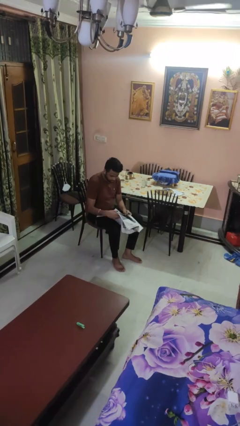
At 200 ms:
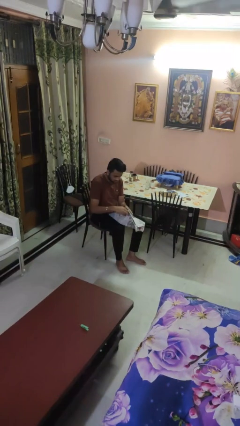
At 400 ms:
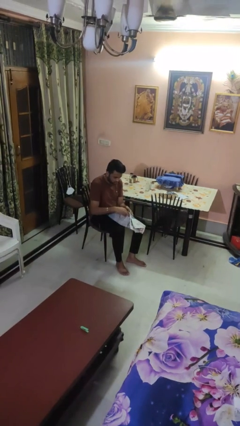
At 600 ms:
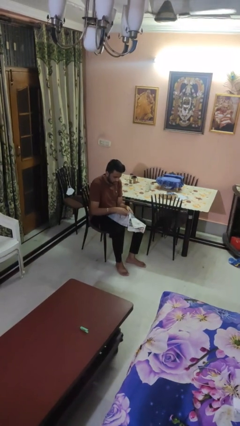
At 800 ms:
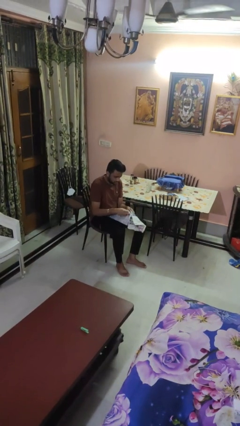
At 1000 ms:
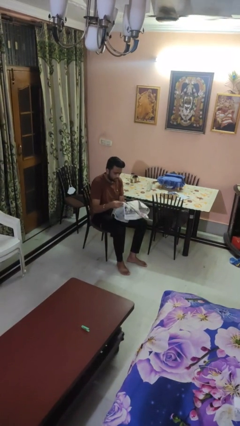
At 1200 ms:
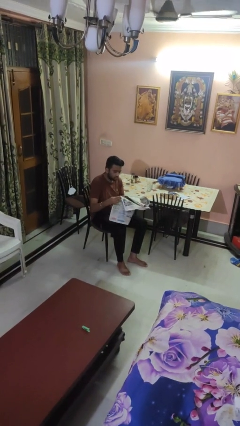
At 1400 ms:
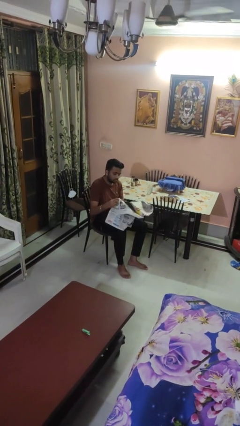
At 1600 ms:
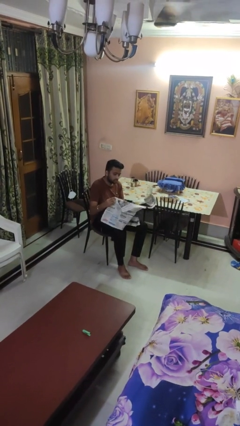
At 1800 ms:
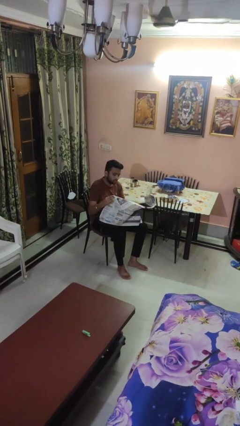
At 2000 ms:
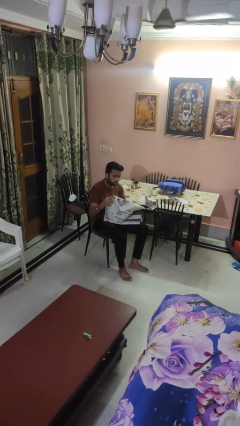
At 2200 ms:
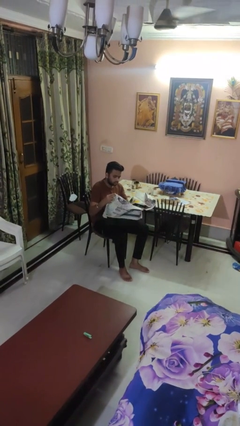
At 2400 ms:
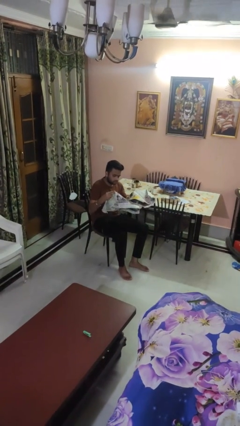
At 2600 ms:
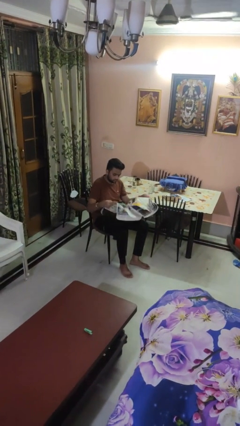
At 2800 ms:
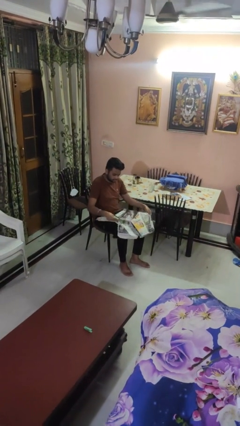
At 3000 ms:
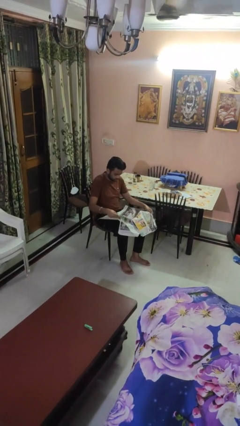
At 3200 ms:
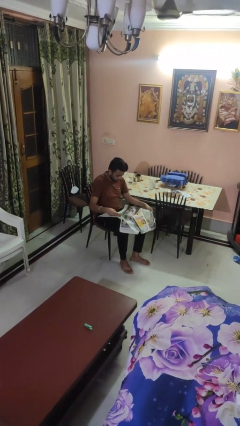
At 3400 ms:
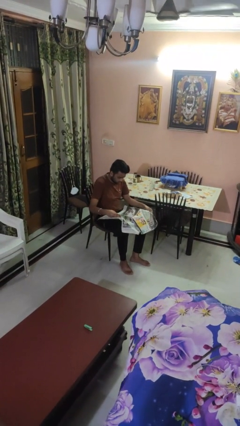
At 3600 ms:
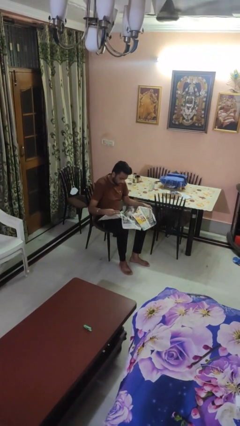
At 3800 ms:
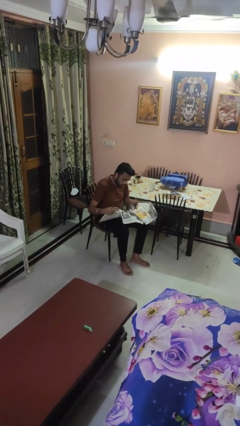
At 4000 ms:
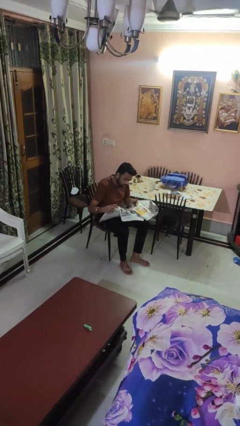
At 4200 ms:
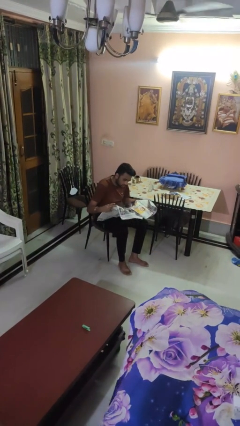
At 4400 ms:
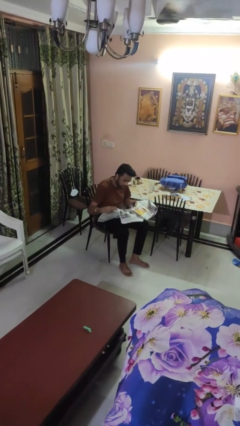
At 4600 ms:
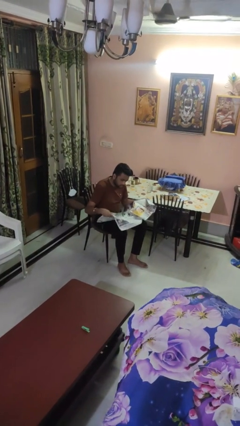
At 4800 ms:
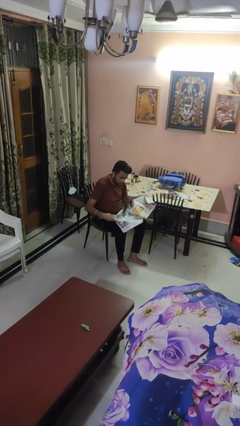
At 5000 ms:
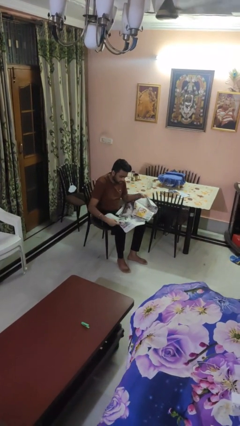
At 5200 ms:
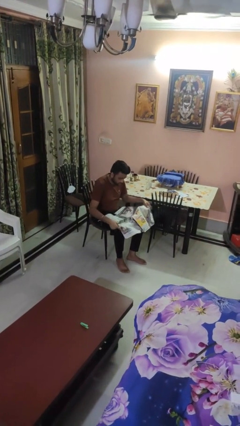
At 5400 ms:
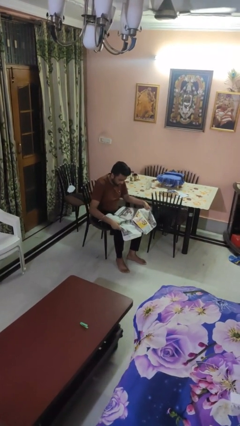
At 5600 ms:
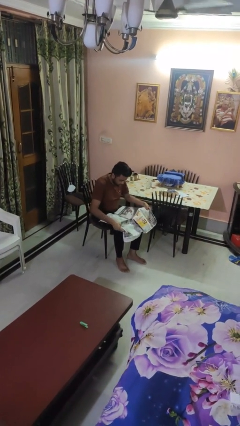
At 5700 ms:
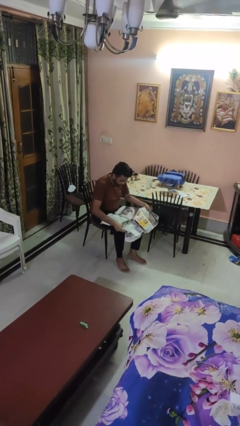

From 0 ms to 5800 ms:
person reads newspaper

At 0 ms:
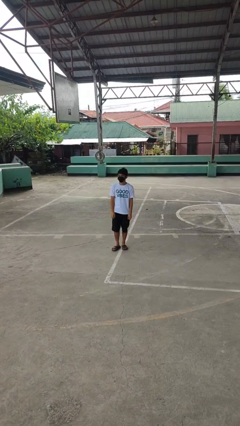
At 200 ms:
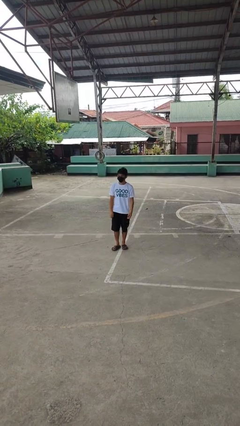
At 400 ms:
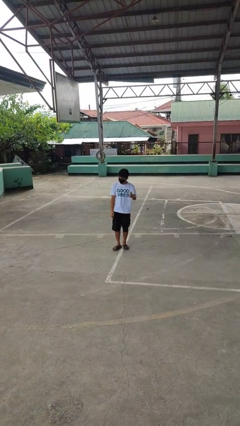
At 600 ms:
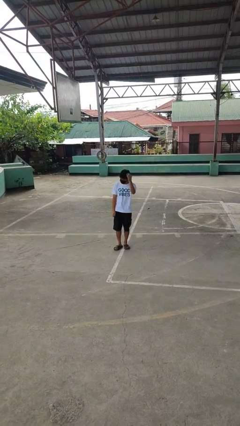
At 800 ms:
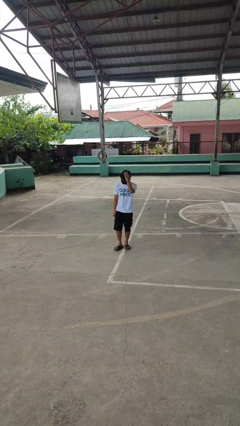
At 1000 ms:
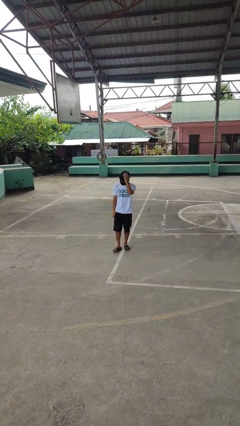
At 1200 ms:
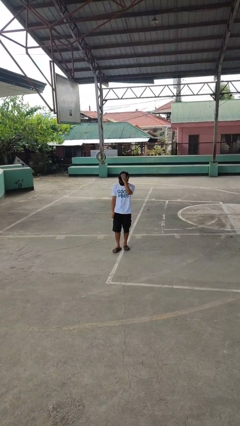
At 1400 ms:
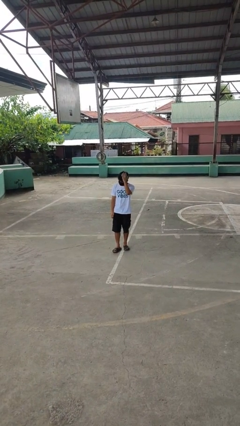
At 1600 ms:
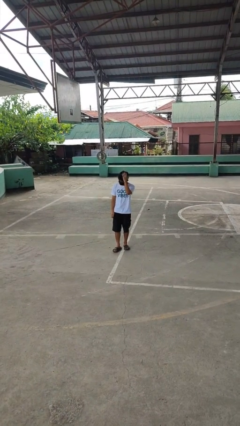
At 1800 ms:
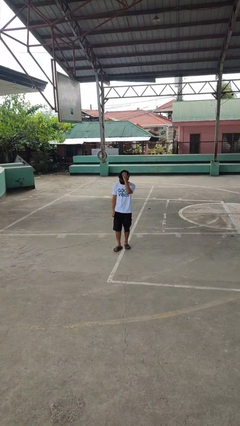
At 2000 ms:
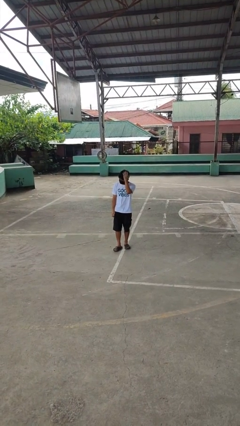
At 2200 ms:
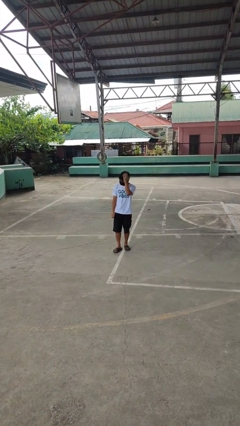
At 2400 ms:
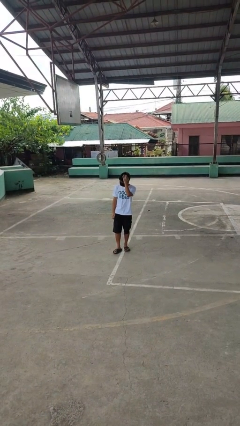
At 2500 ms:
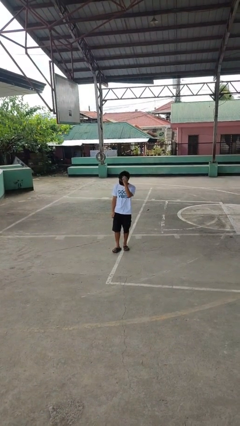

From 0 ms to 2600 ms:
person pats head

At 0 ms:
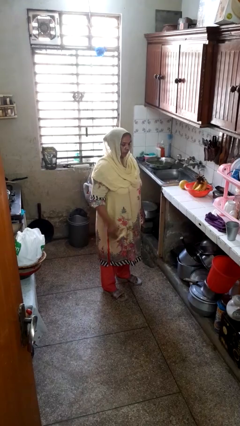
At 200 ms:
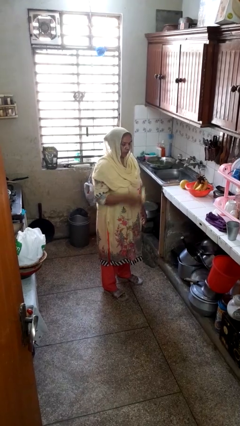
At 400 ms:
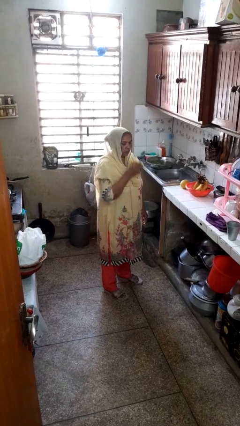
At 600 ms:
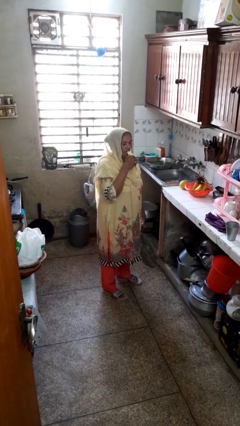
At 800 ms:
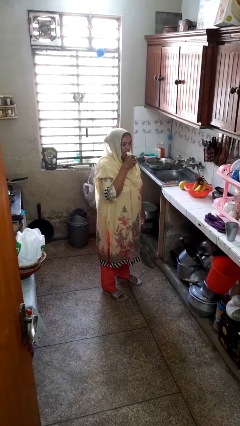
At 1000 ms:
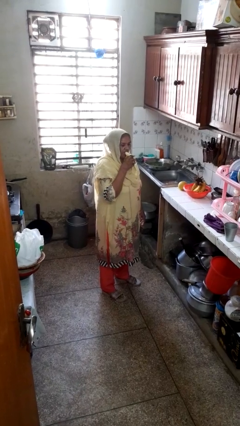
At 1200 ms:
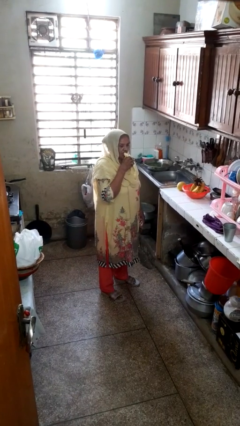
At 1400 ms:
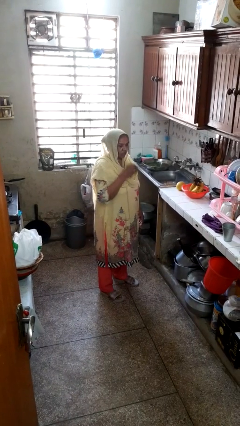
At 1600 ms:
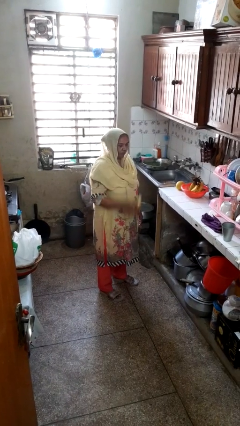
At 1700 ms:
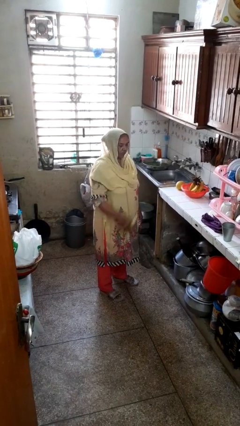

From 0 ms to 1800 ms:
person eats banana

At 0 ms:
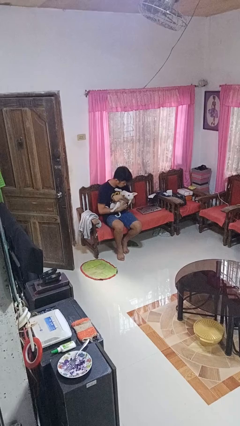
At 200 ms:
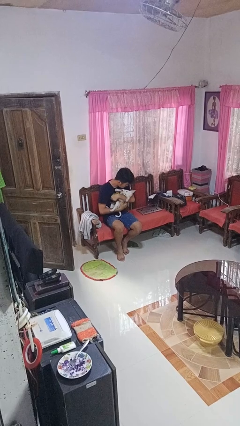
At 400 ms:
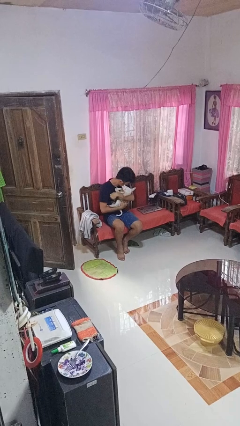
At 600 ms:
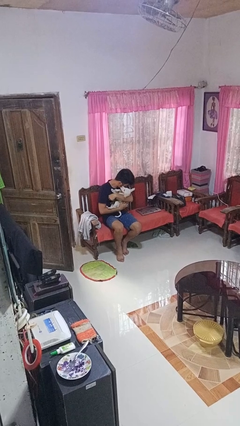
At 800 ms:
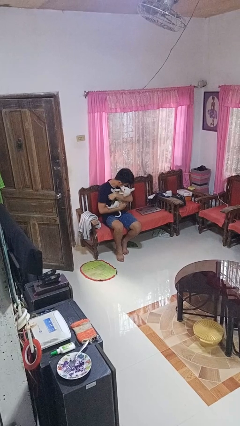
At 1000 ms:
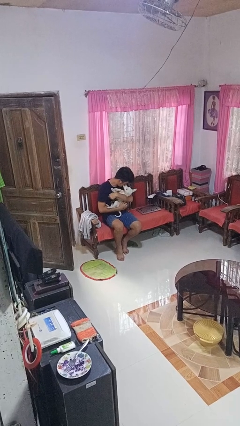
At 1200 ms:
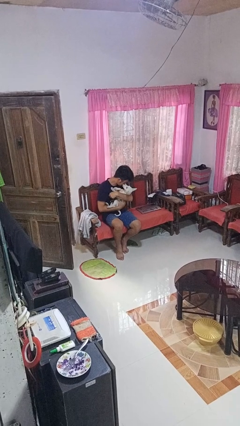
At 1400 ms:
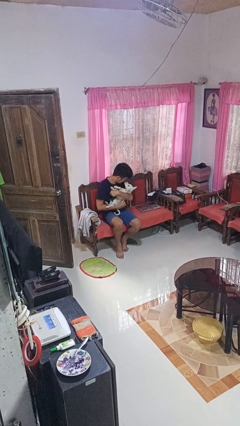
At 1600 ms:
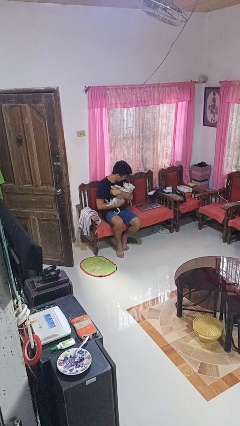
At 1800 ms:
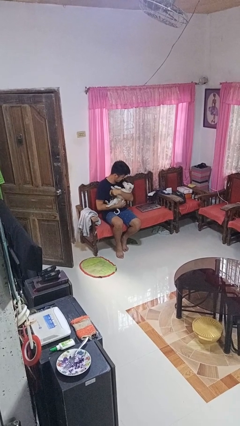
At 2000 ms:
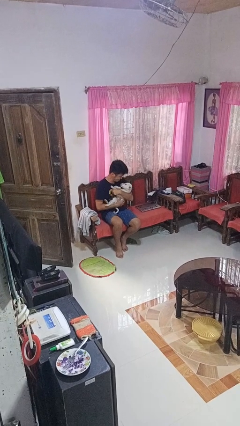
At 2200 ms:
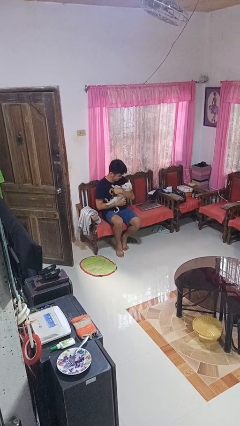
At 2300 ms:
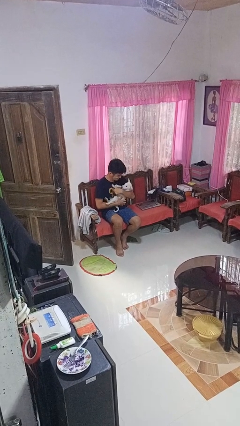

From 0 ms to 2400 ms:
person hugs dog

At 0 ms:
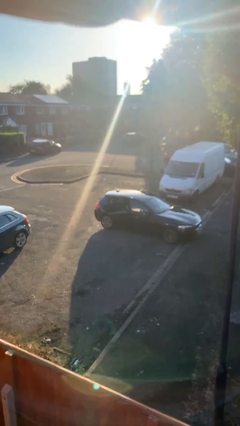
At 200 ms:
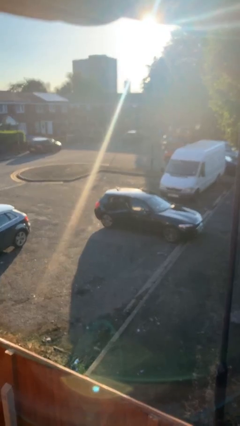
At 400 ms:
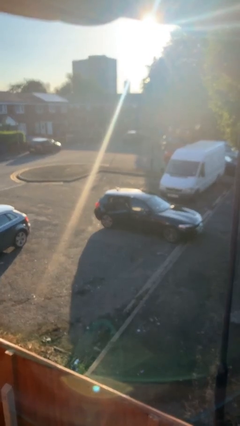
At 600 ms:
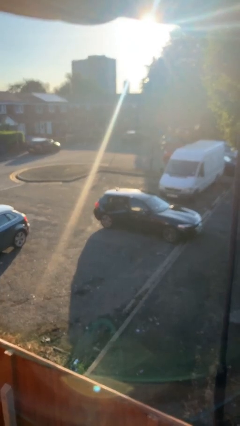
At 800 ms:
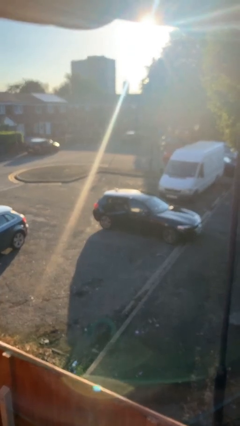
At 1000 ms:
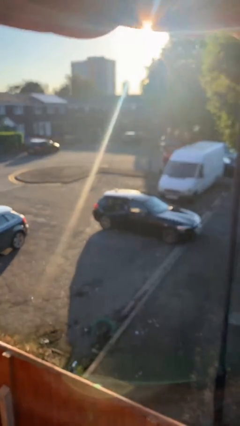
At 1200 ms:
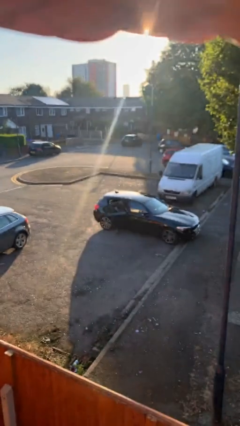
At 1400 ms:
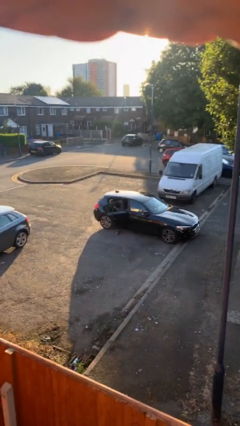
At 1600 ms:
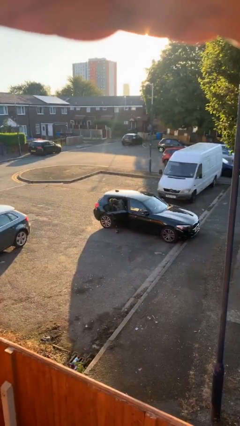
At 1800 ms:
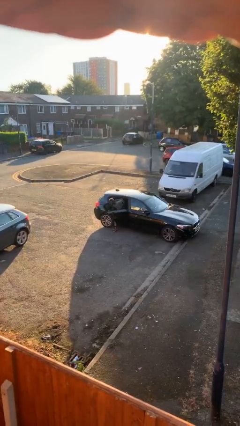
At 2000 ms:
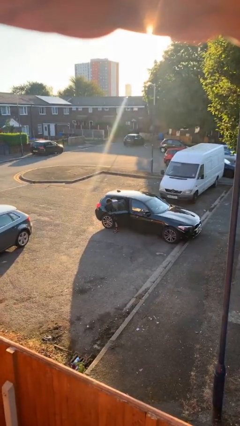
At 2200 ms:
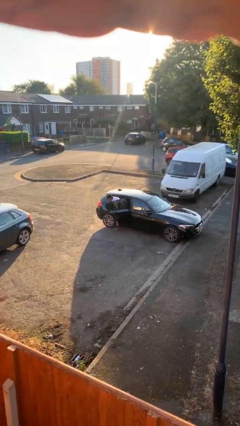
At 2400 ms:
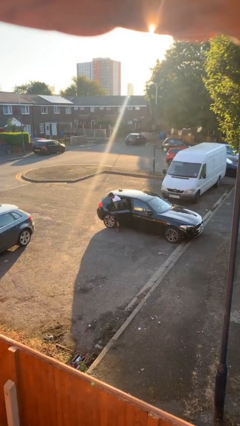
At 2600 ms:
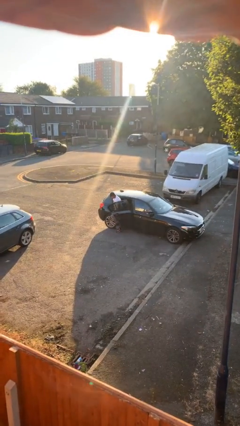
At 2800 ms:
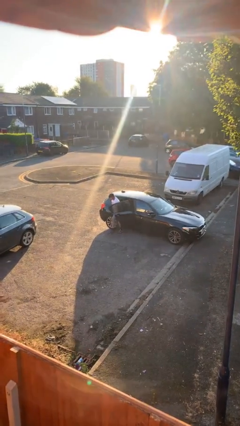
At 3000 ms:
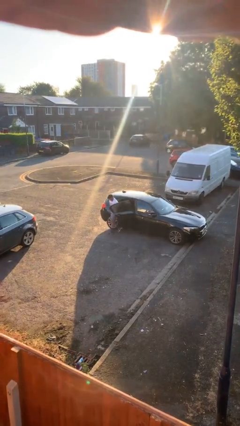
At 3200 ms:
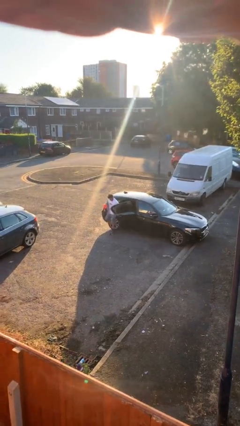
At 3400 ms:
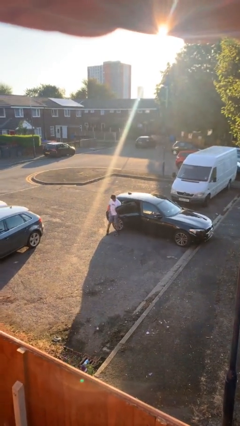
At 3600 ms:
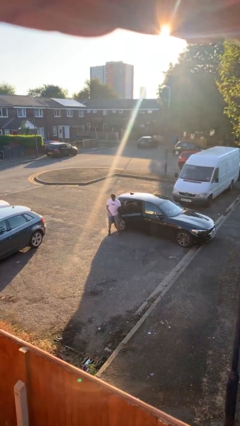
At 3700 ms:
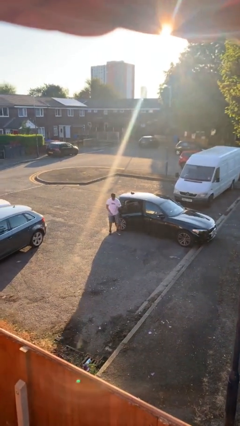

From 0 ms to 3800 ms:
person exits car

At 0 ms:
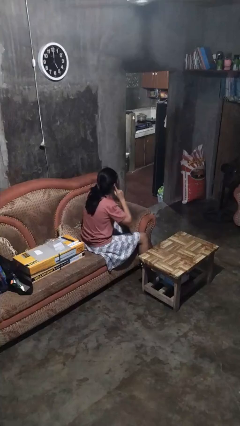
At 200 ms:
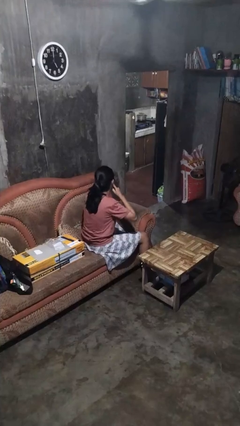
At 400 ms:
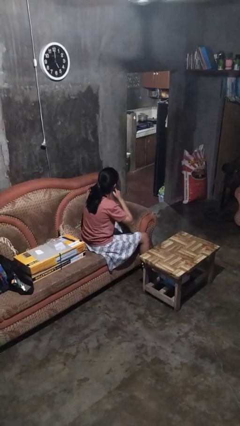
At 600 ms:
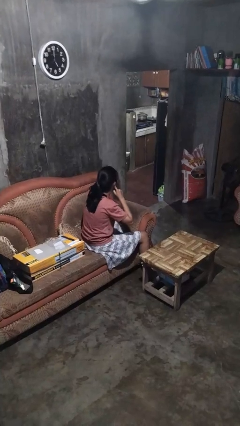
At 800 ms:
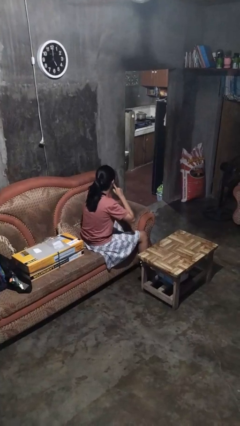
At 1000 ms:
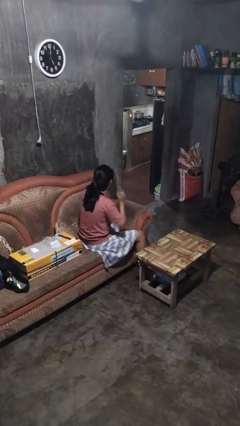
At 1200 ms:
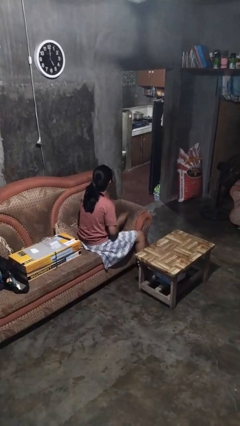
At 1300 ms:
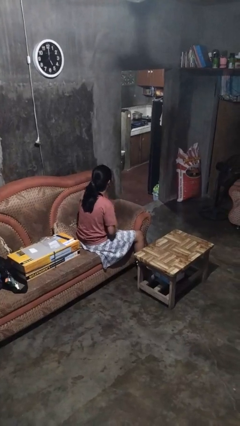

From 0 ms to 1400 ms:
person puts fingers in ear
